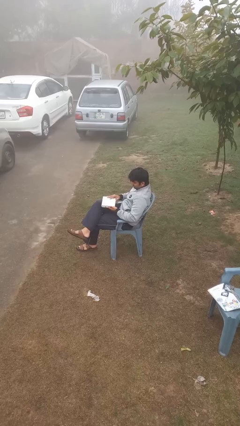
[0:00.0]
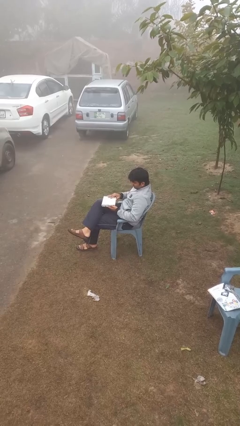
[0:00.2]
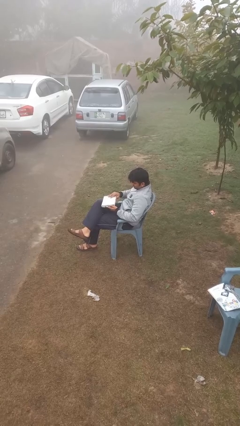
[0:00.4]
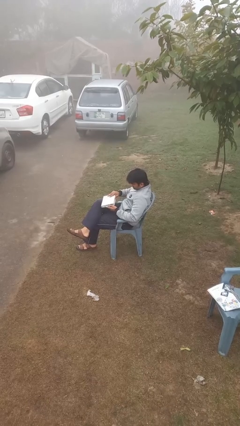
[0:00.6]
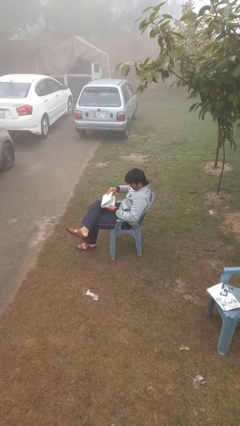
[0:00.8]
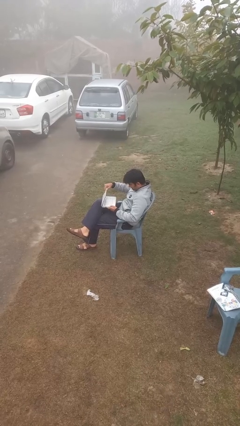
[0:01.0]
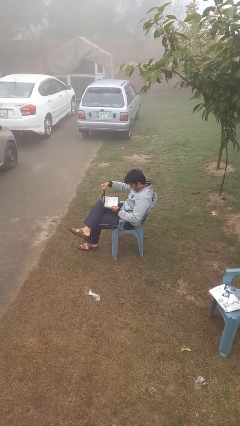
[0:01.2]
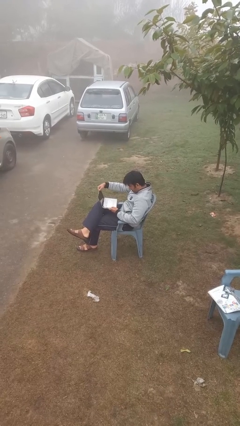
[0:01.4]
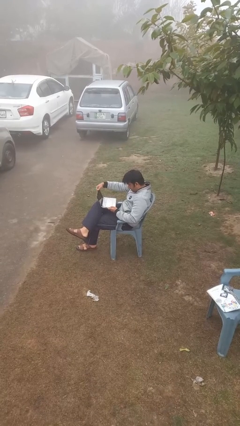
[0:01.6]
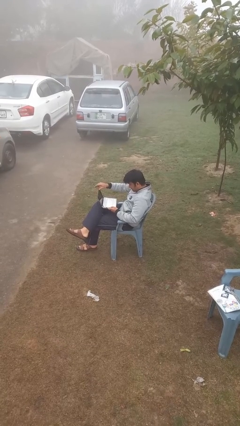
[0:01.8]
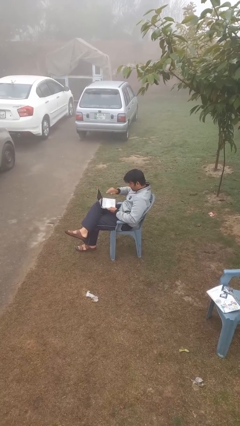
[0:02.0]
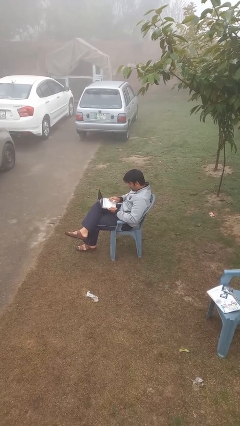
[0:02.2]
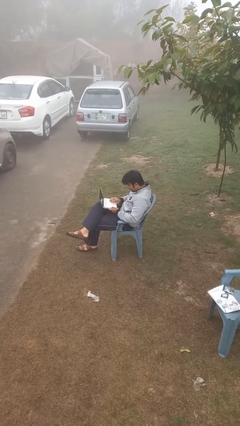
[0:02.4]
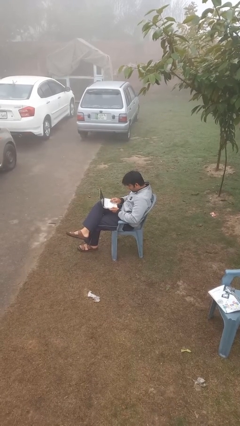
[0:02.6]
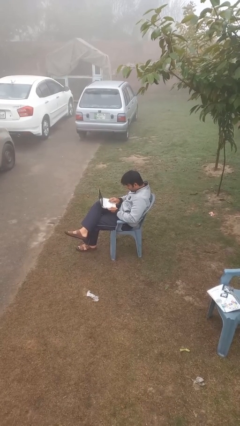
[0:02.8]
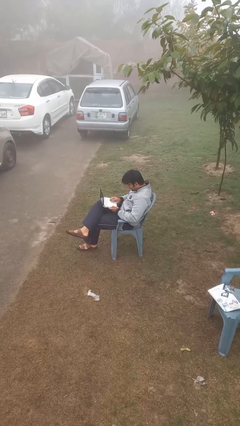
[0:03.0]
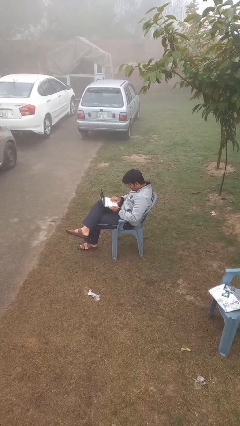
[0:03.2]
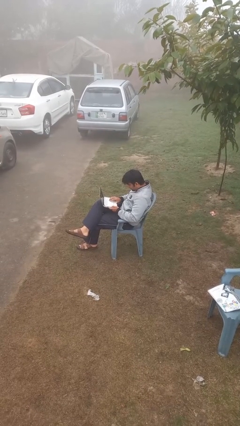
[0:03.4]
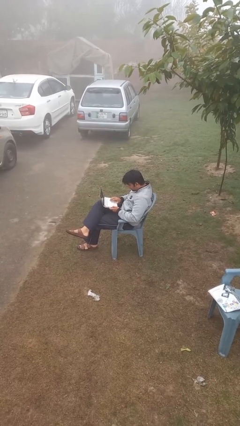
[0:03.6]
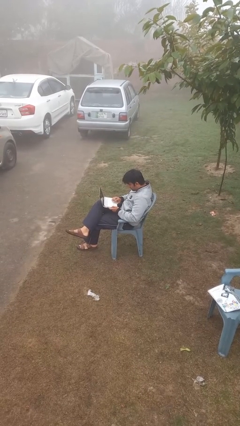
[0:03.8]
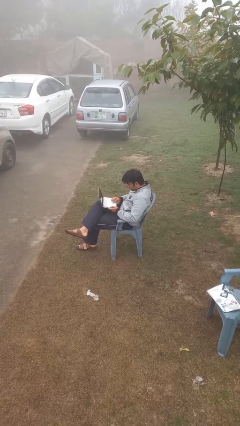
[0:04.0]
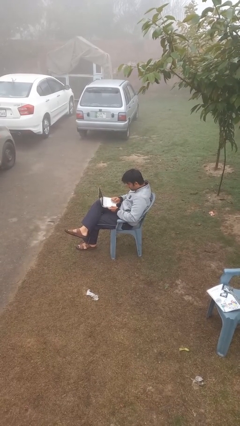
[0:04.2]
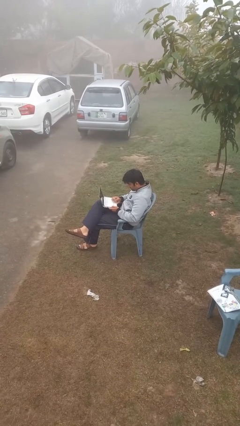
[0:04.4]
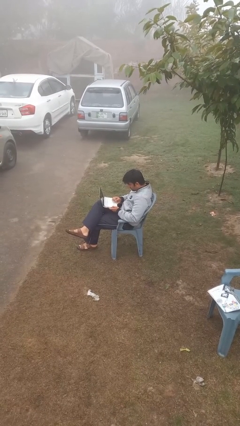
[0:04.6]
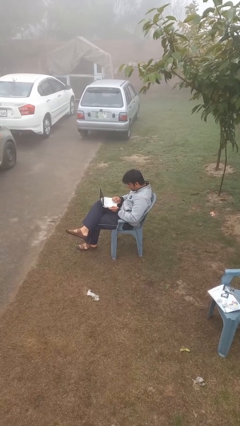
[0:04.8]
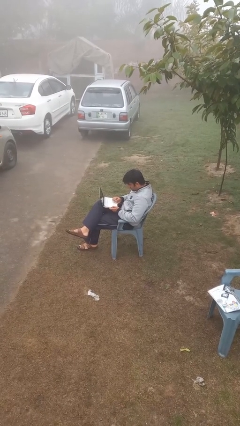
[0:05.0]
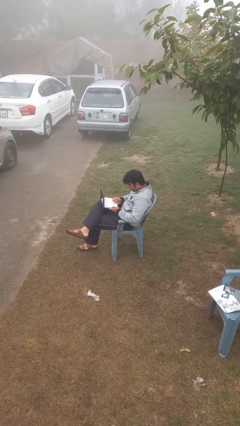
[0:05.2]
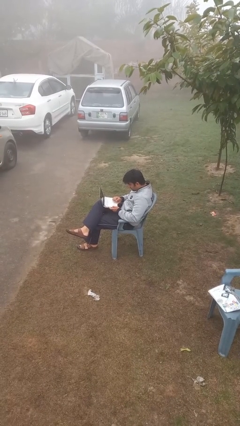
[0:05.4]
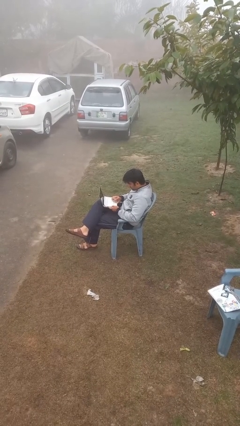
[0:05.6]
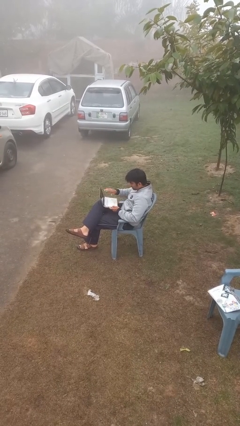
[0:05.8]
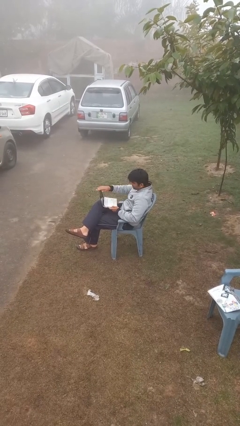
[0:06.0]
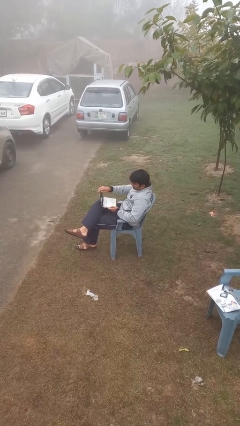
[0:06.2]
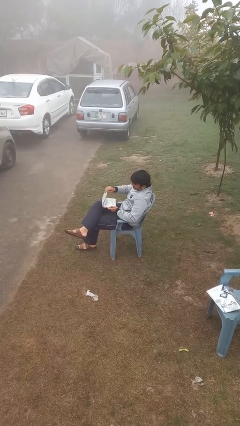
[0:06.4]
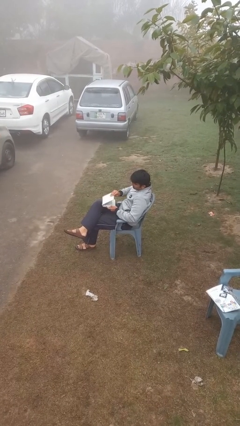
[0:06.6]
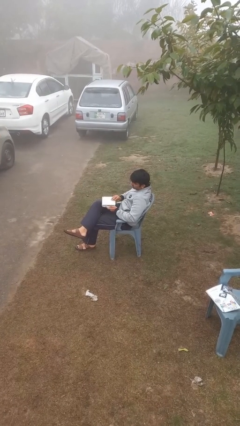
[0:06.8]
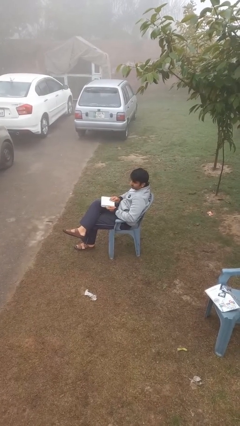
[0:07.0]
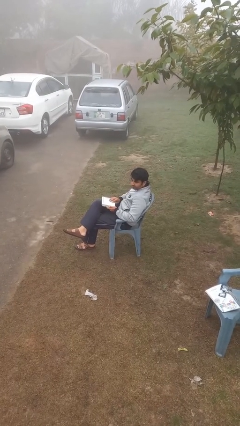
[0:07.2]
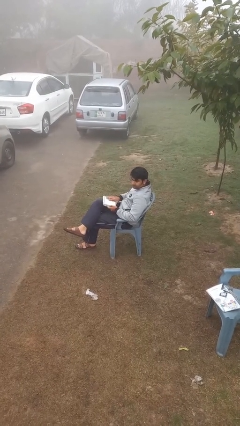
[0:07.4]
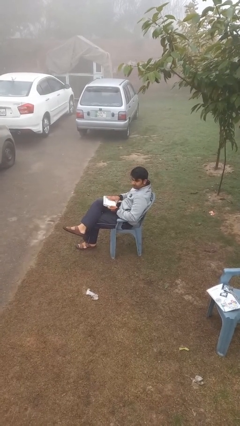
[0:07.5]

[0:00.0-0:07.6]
person interacts with laptop

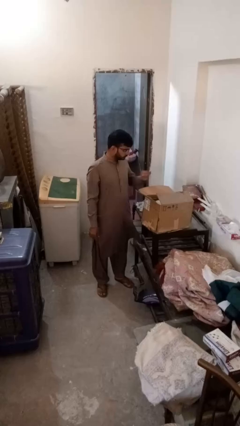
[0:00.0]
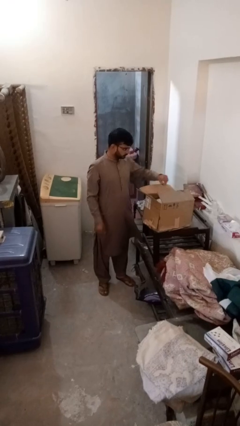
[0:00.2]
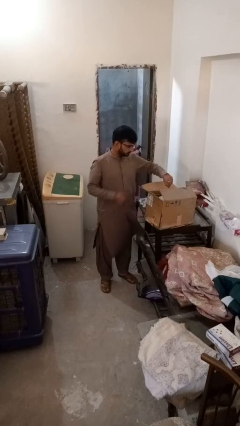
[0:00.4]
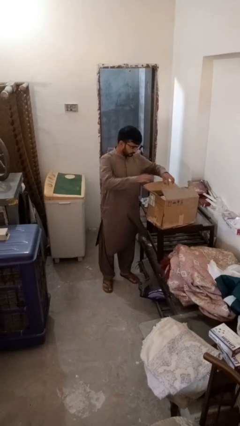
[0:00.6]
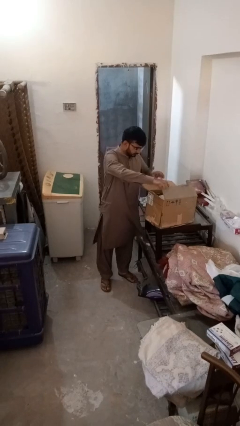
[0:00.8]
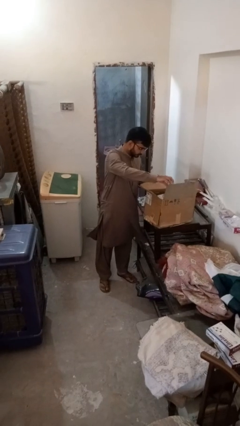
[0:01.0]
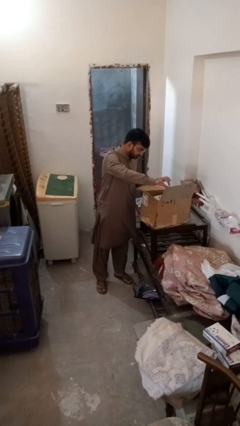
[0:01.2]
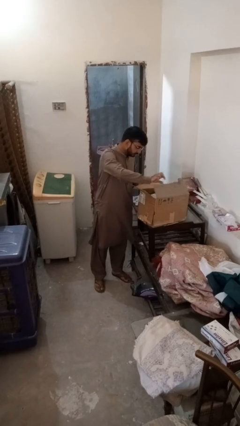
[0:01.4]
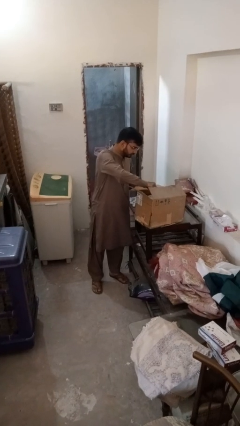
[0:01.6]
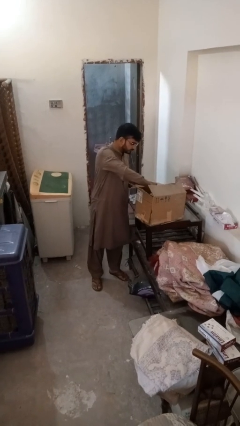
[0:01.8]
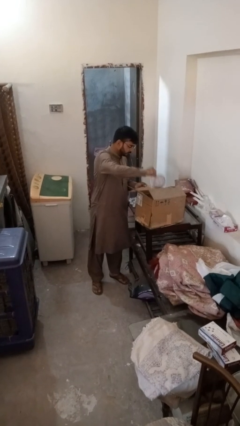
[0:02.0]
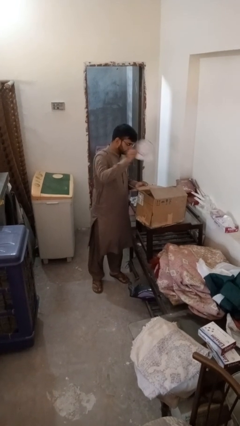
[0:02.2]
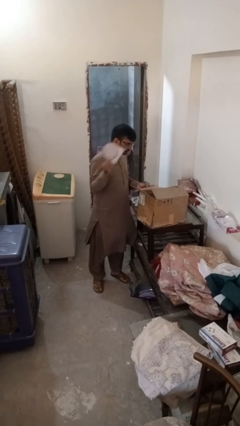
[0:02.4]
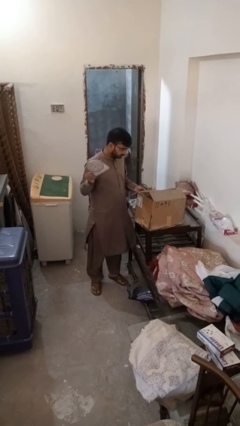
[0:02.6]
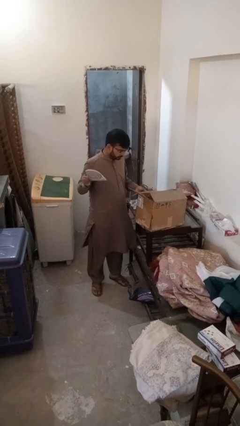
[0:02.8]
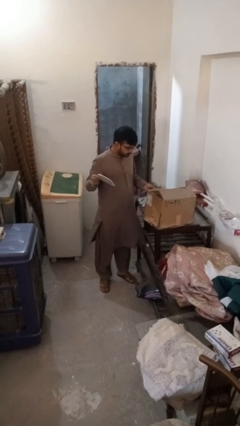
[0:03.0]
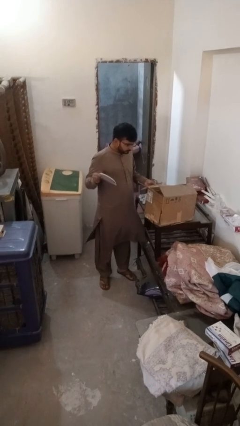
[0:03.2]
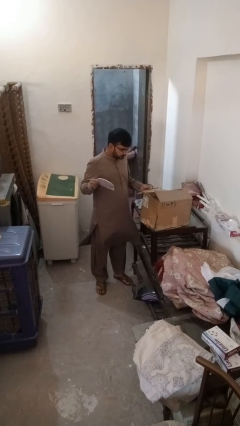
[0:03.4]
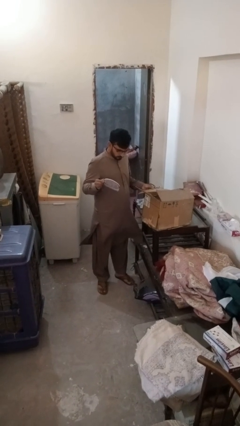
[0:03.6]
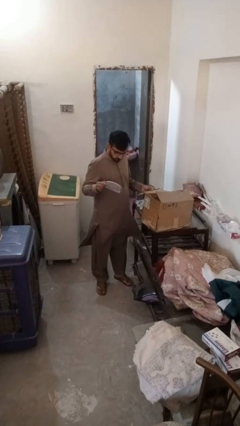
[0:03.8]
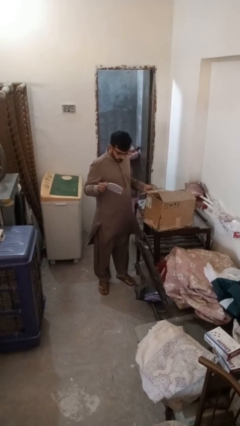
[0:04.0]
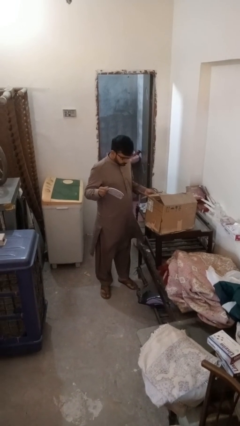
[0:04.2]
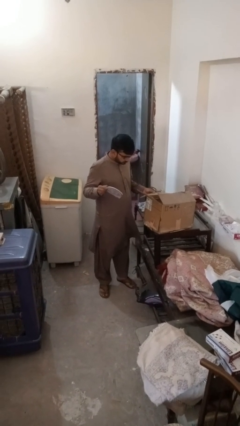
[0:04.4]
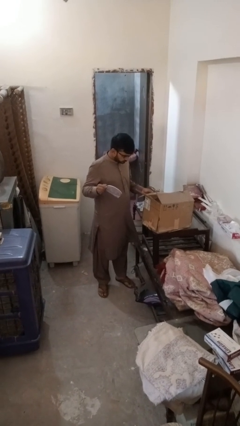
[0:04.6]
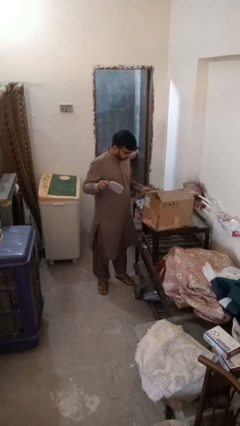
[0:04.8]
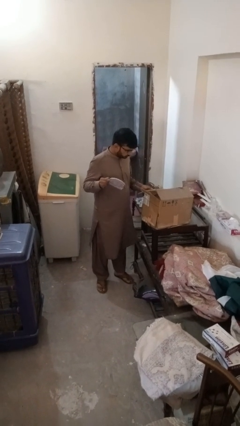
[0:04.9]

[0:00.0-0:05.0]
person takes object from box

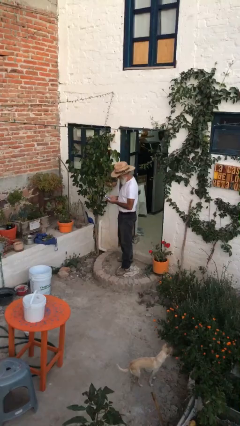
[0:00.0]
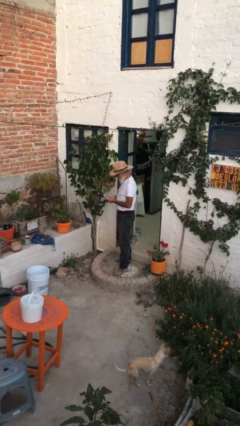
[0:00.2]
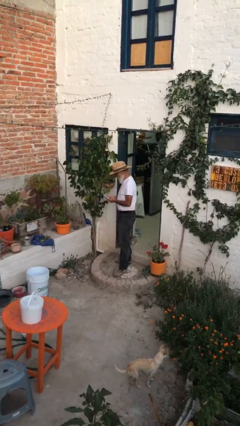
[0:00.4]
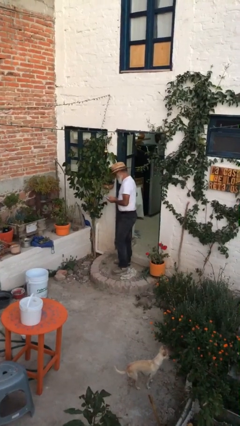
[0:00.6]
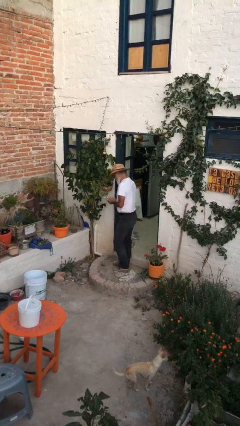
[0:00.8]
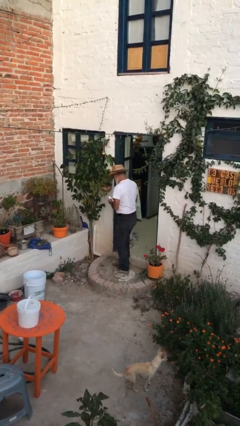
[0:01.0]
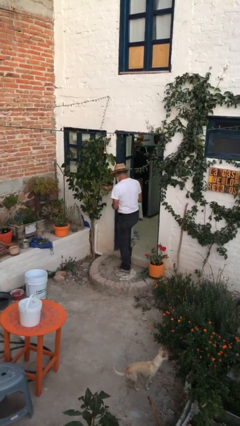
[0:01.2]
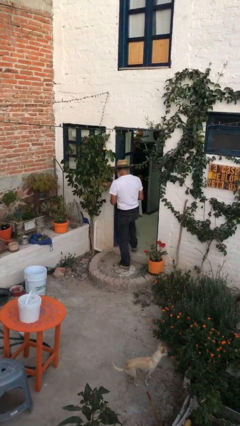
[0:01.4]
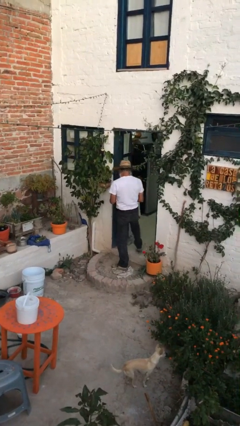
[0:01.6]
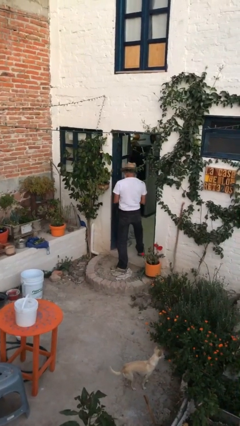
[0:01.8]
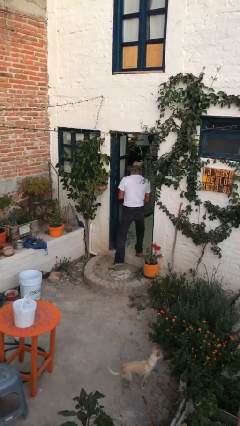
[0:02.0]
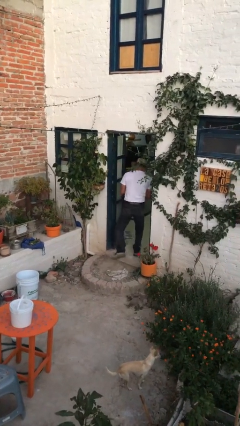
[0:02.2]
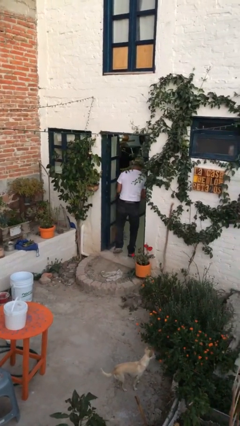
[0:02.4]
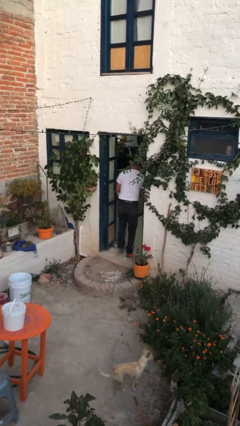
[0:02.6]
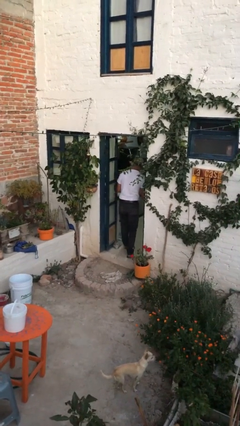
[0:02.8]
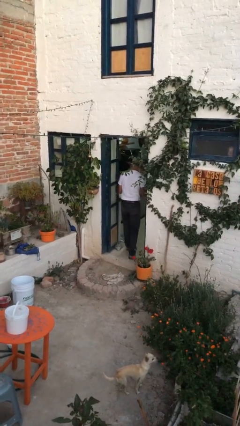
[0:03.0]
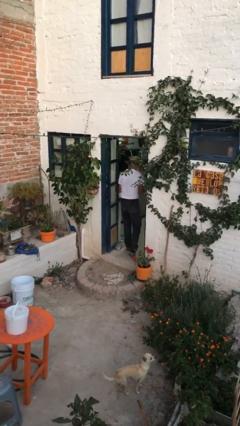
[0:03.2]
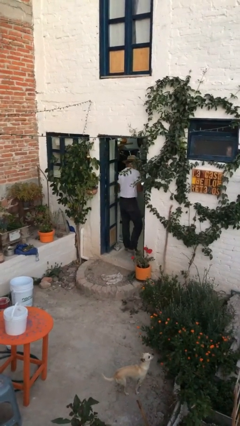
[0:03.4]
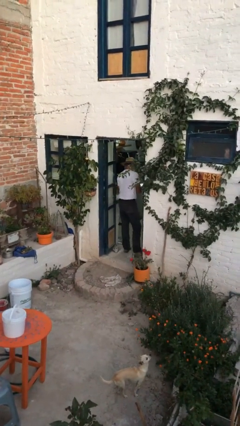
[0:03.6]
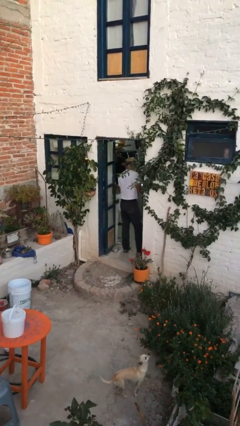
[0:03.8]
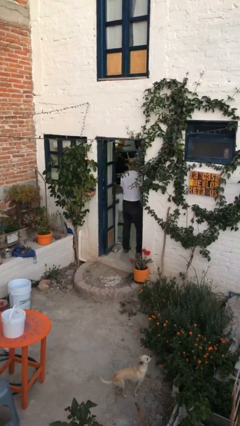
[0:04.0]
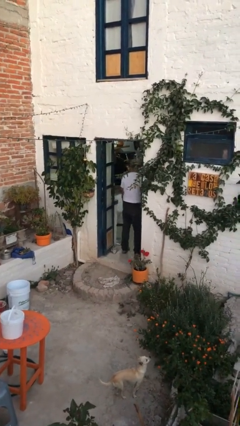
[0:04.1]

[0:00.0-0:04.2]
person exits scene through structure

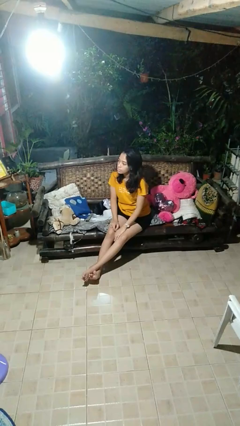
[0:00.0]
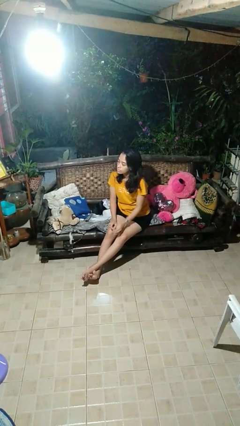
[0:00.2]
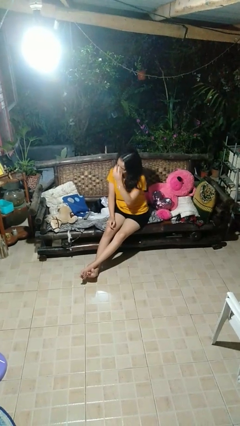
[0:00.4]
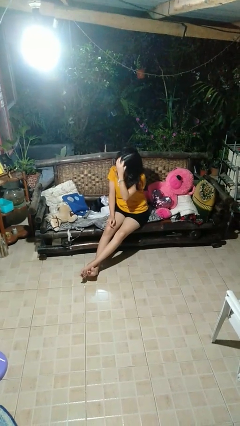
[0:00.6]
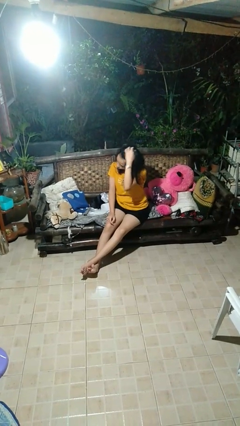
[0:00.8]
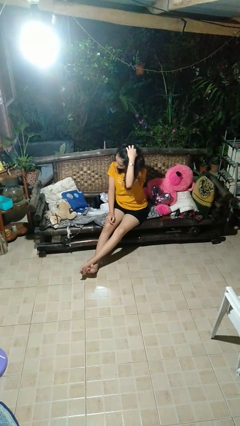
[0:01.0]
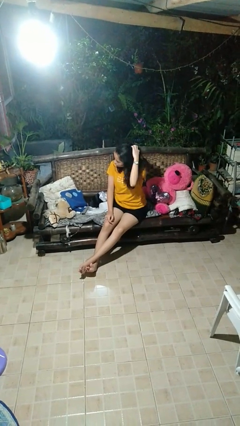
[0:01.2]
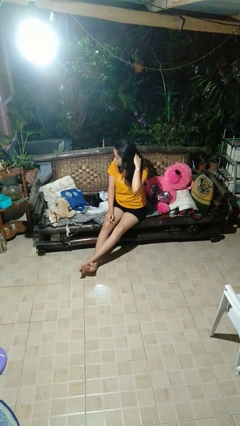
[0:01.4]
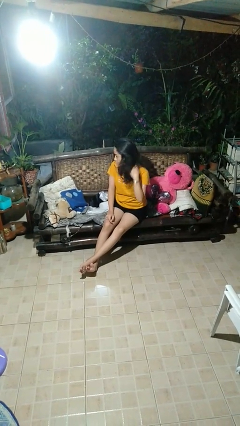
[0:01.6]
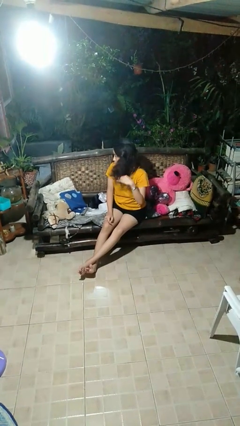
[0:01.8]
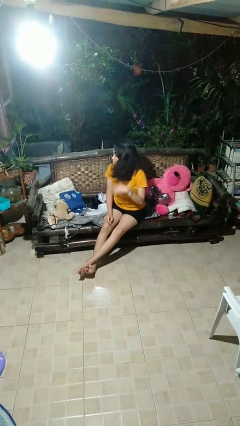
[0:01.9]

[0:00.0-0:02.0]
person strokes hair
